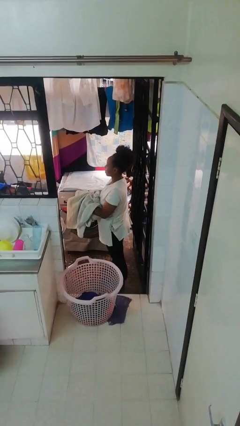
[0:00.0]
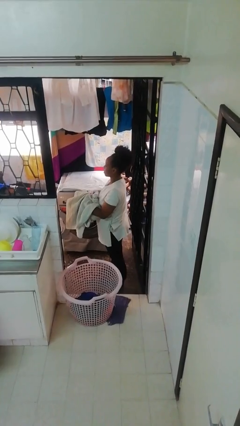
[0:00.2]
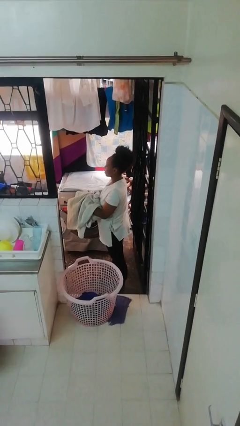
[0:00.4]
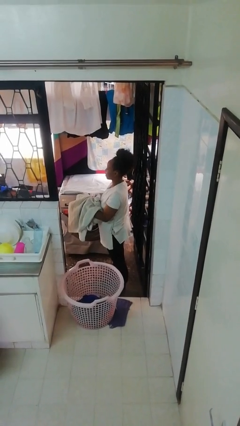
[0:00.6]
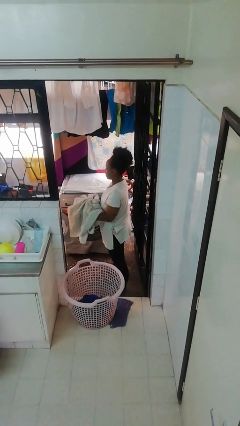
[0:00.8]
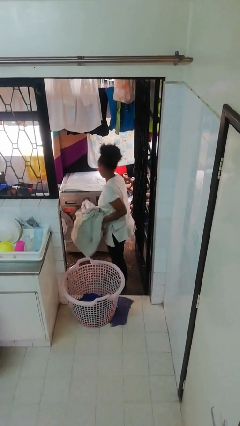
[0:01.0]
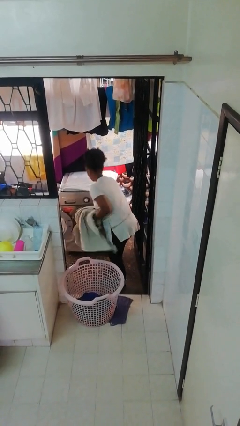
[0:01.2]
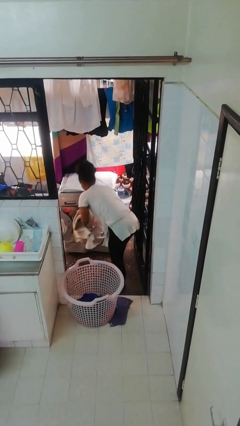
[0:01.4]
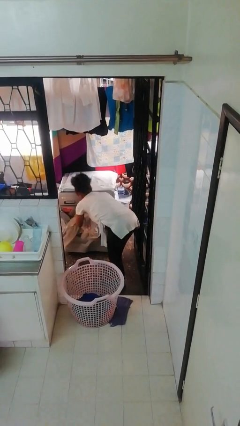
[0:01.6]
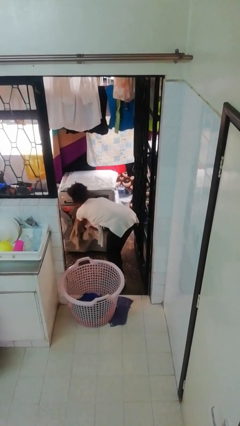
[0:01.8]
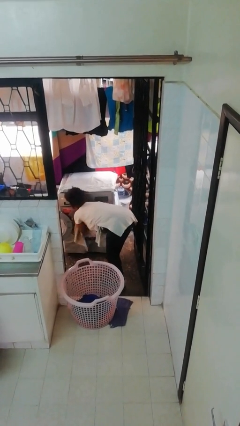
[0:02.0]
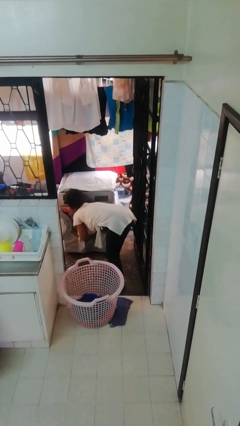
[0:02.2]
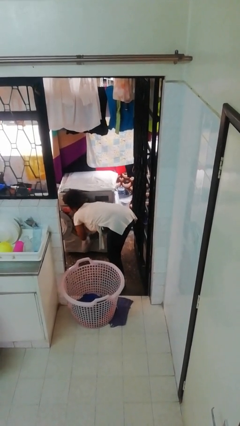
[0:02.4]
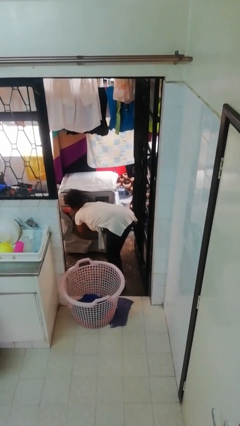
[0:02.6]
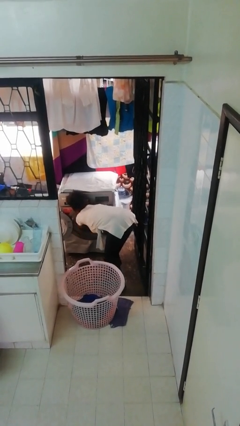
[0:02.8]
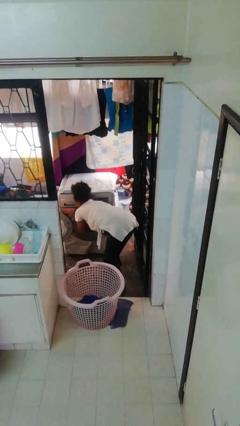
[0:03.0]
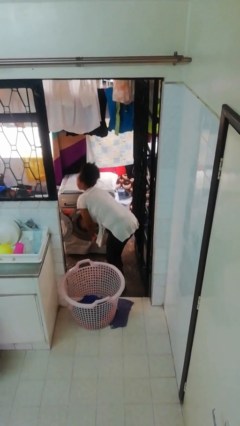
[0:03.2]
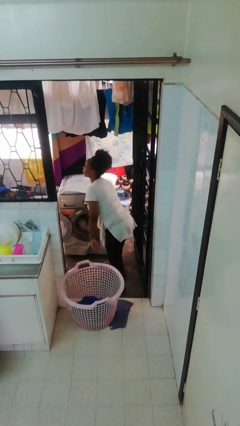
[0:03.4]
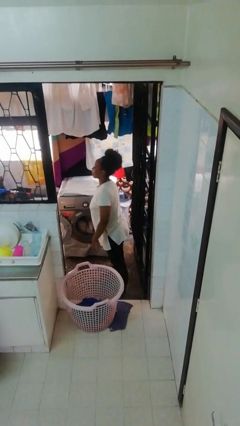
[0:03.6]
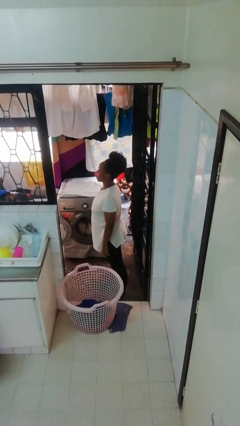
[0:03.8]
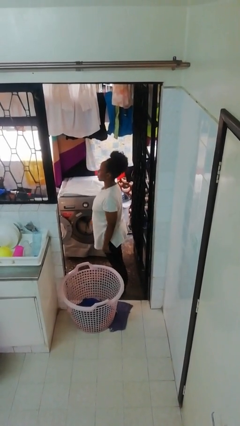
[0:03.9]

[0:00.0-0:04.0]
person loads dryer

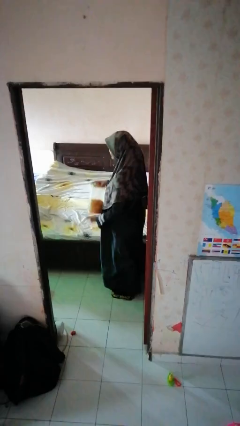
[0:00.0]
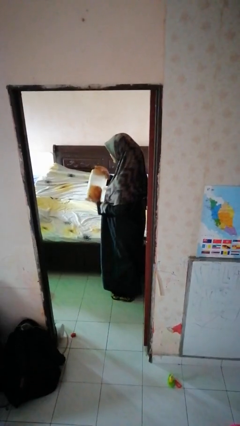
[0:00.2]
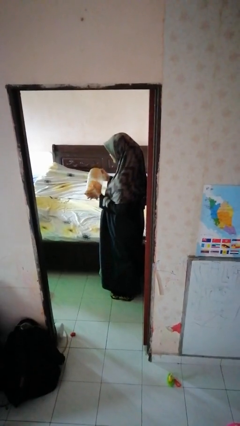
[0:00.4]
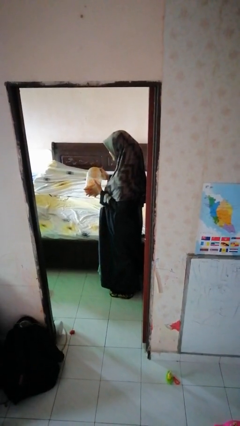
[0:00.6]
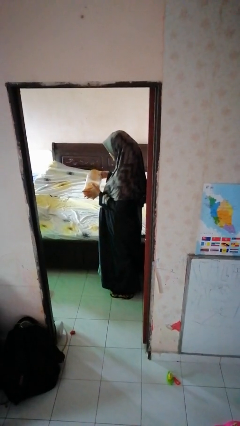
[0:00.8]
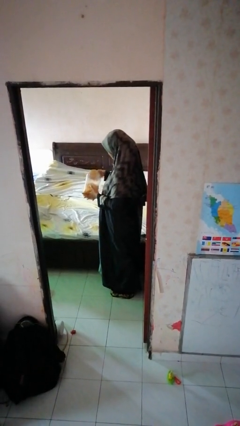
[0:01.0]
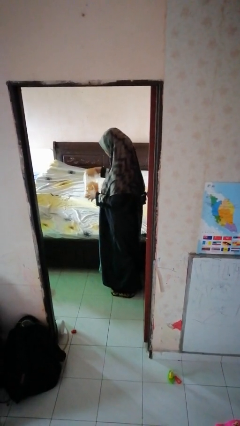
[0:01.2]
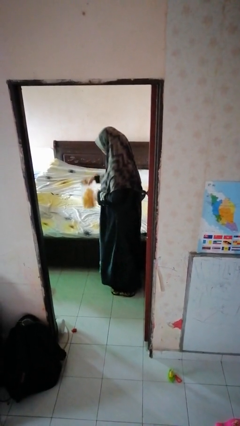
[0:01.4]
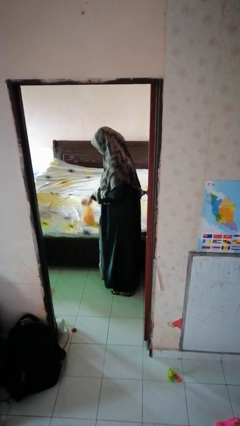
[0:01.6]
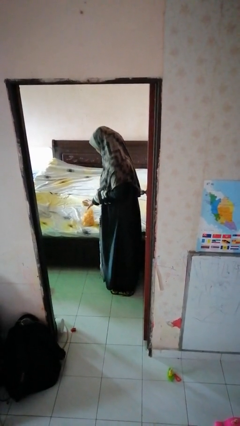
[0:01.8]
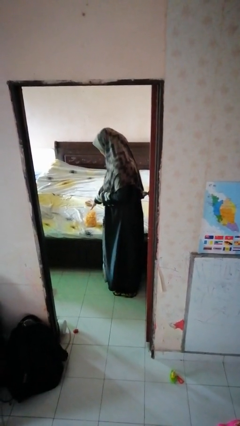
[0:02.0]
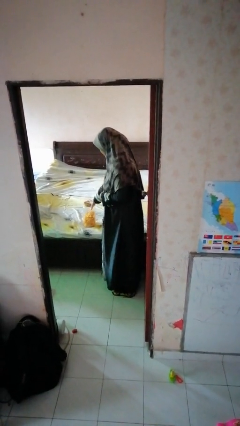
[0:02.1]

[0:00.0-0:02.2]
person puts down object on bed

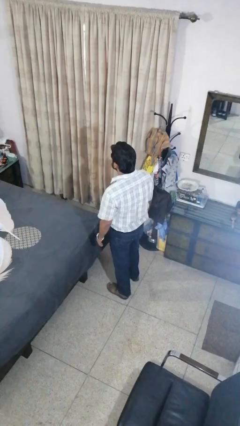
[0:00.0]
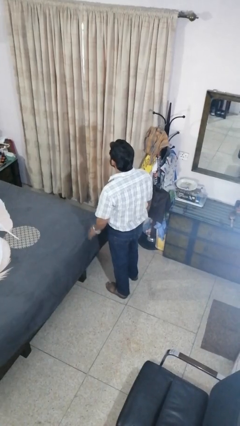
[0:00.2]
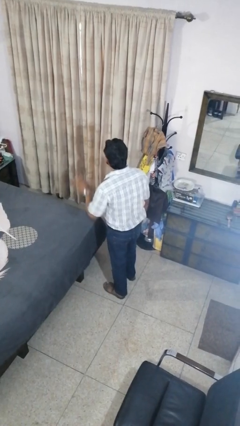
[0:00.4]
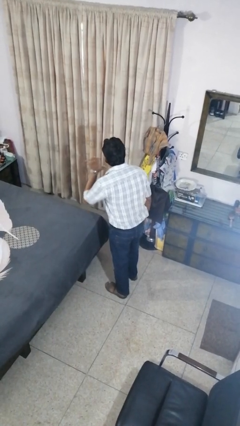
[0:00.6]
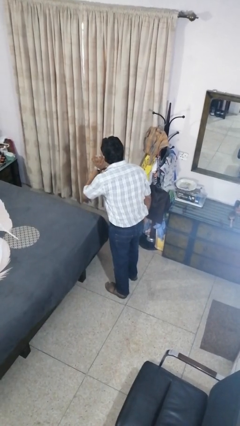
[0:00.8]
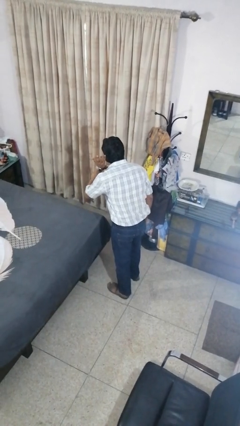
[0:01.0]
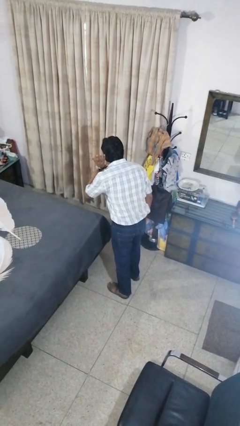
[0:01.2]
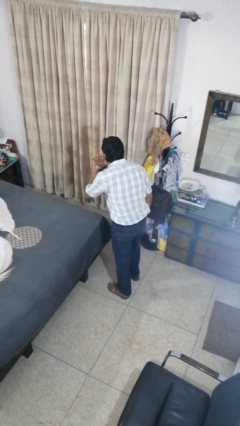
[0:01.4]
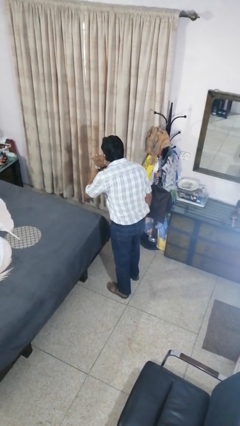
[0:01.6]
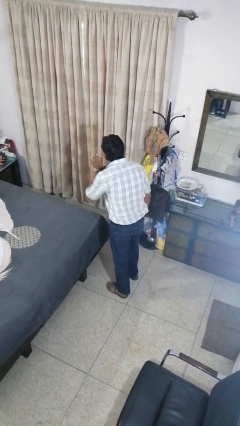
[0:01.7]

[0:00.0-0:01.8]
person gestures listen closely

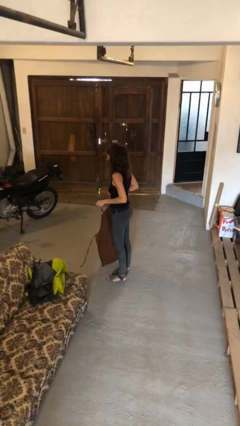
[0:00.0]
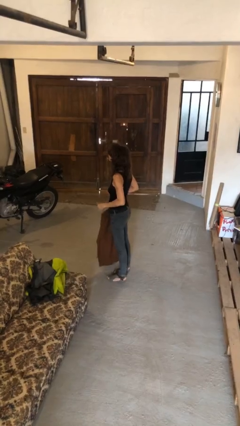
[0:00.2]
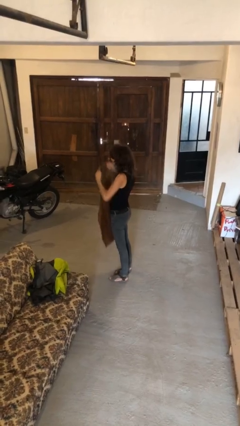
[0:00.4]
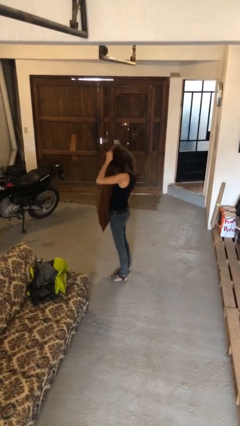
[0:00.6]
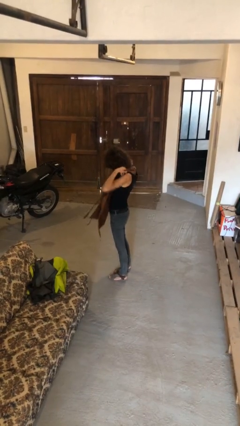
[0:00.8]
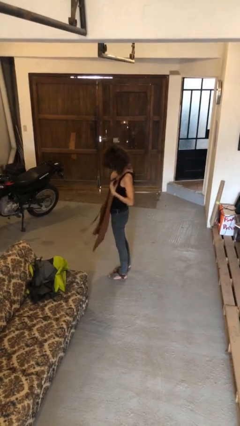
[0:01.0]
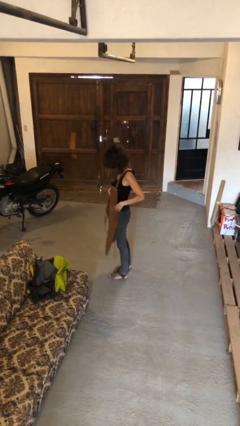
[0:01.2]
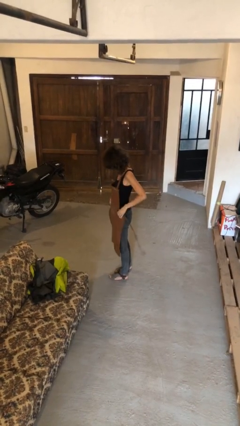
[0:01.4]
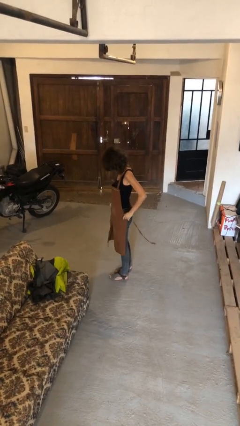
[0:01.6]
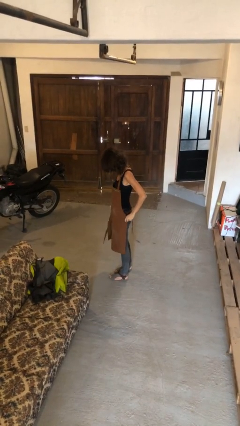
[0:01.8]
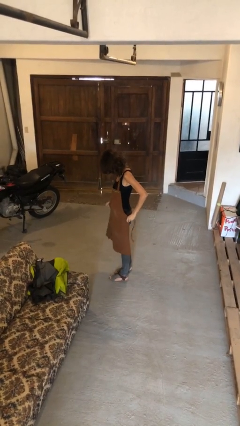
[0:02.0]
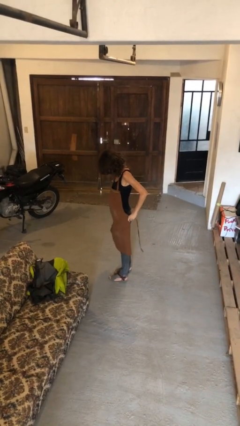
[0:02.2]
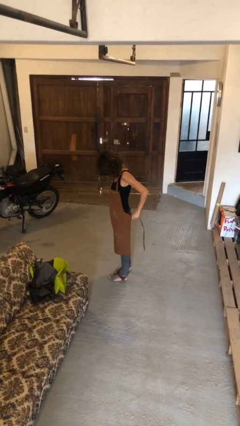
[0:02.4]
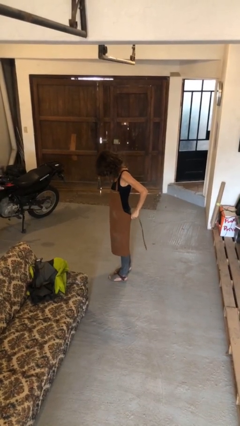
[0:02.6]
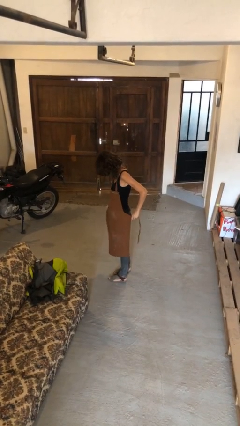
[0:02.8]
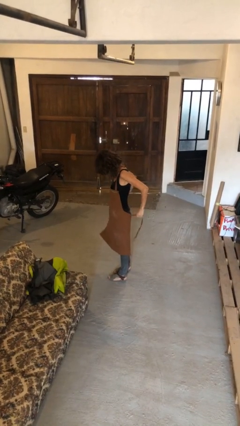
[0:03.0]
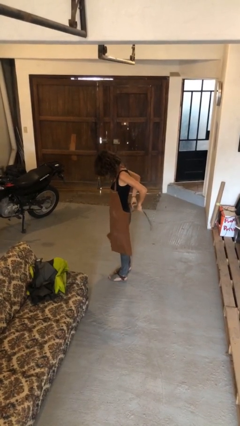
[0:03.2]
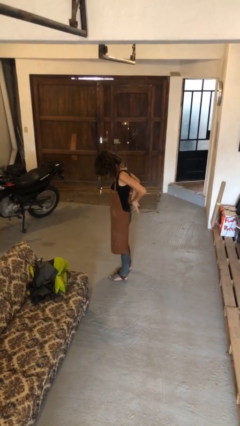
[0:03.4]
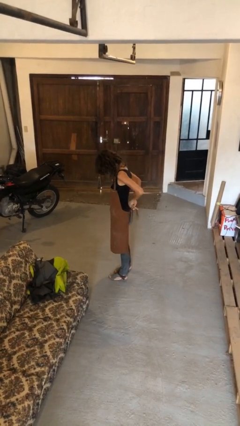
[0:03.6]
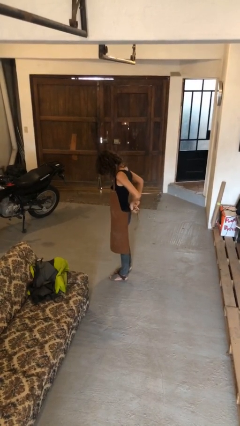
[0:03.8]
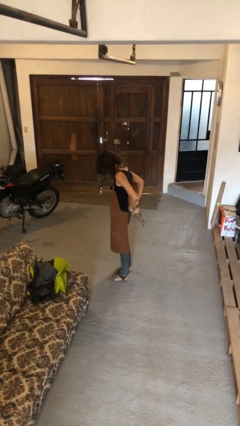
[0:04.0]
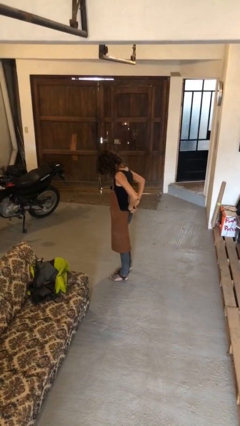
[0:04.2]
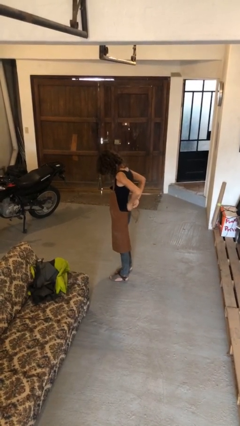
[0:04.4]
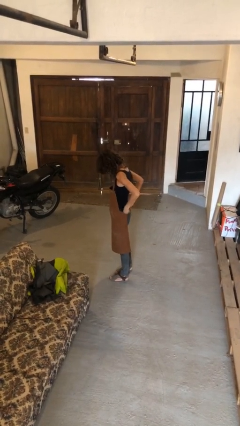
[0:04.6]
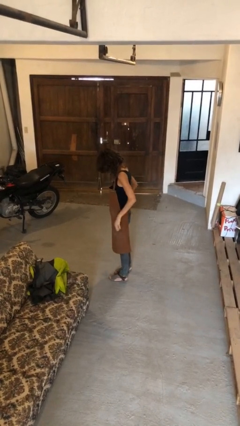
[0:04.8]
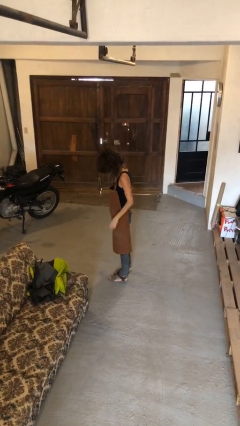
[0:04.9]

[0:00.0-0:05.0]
person puts on apron

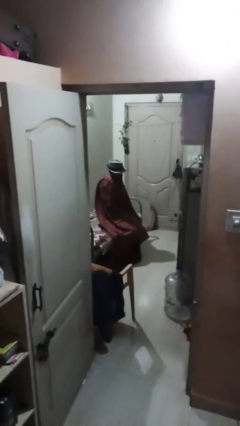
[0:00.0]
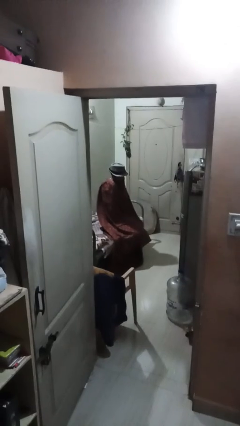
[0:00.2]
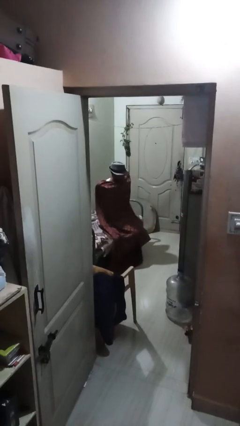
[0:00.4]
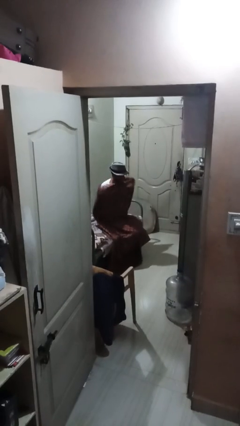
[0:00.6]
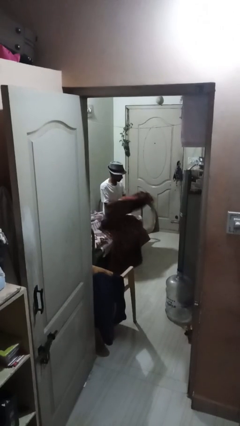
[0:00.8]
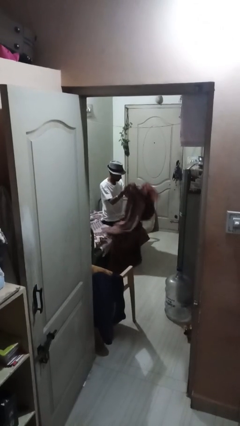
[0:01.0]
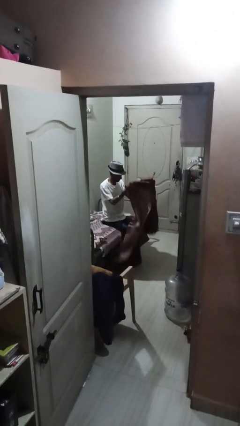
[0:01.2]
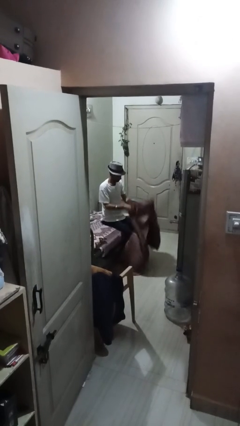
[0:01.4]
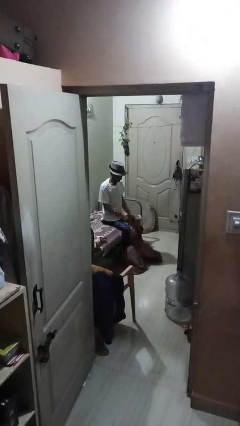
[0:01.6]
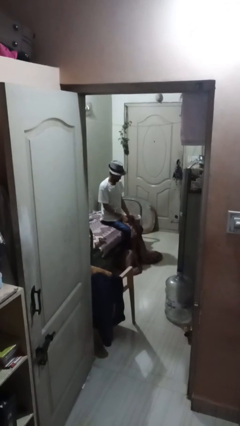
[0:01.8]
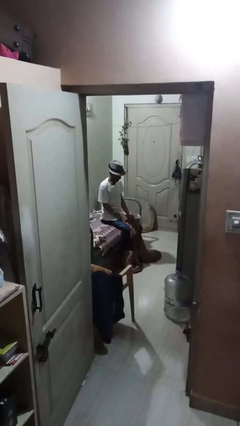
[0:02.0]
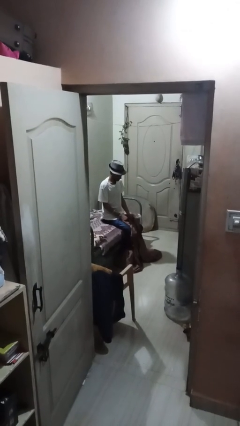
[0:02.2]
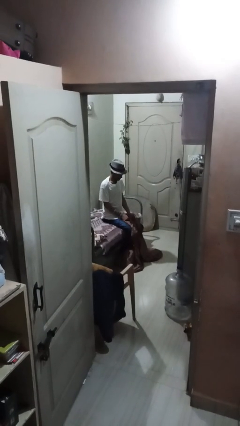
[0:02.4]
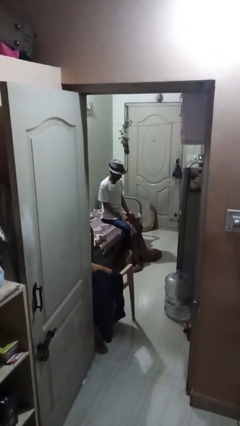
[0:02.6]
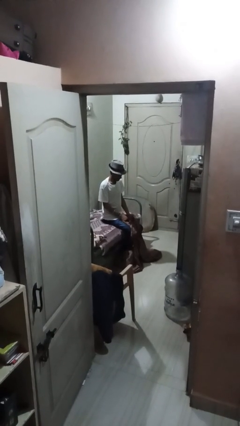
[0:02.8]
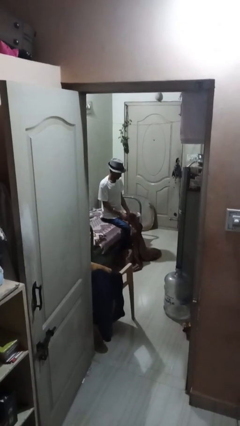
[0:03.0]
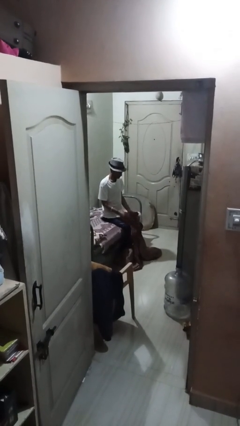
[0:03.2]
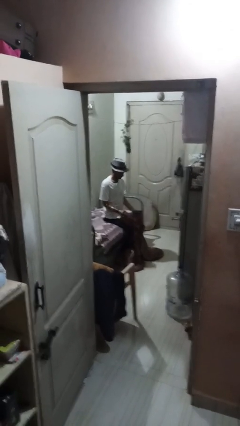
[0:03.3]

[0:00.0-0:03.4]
person uncovers with blanket

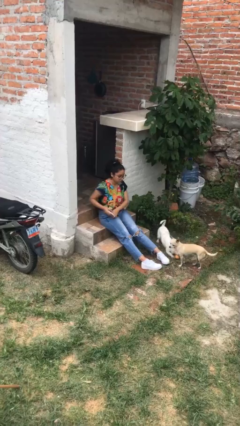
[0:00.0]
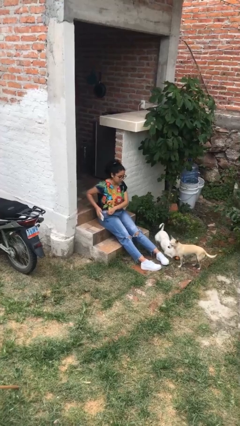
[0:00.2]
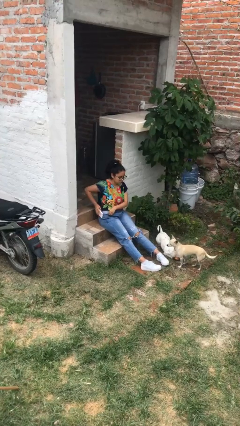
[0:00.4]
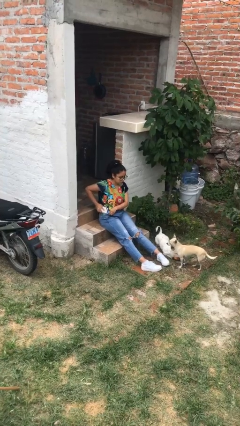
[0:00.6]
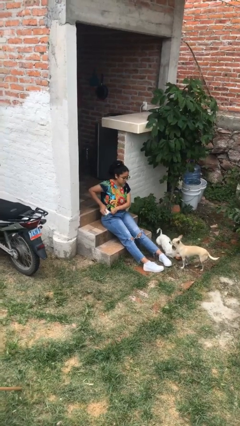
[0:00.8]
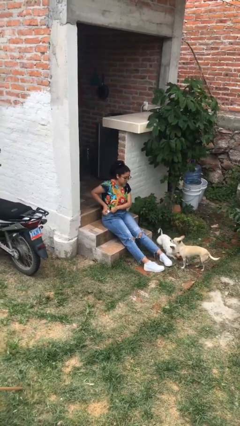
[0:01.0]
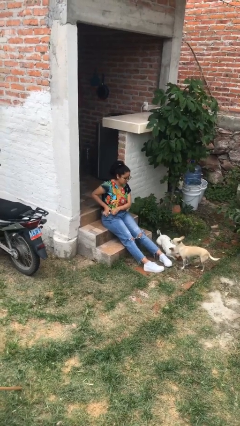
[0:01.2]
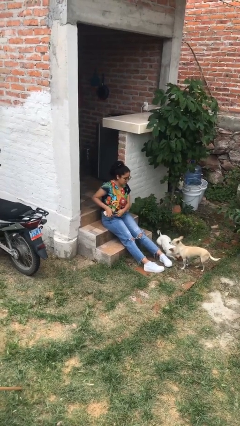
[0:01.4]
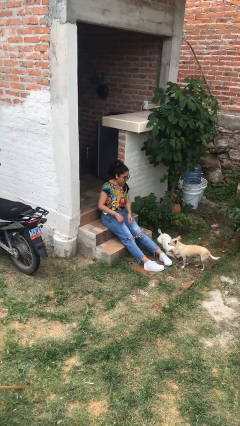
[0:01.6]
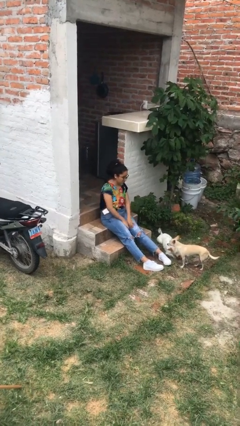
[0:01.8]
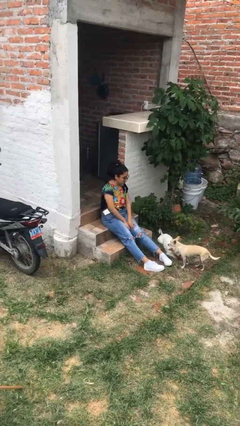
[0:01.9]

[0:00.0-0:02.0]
person puts phone into pocket
